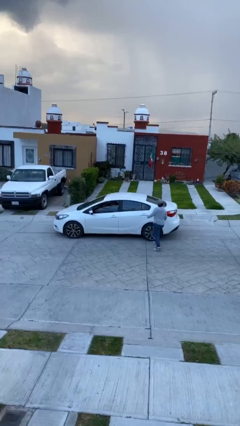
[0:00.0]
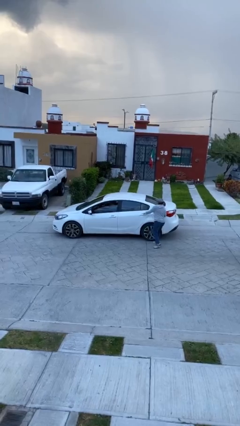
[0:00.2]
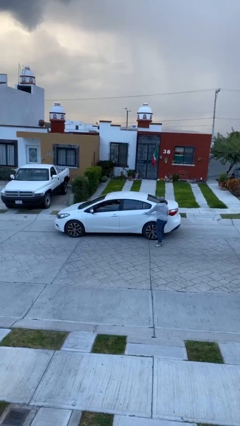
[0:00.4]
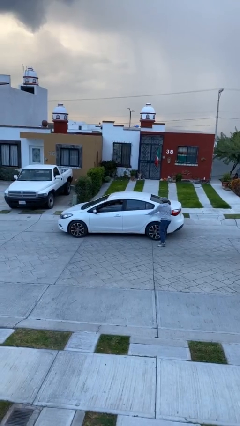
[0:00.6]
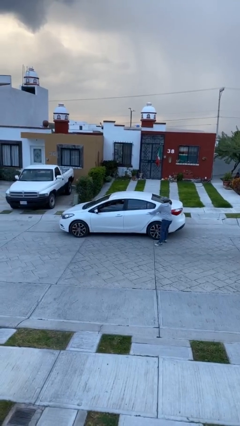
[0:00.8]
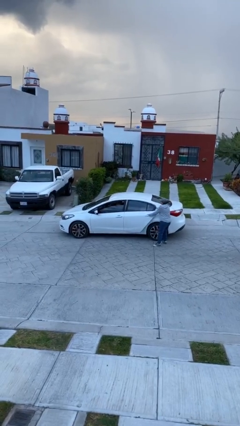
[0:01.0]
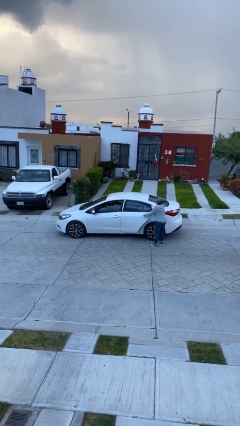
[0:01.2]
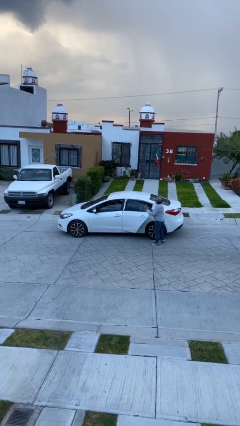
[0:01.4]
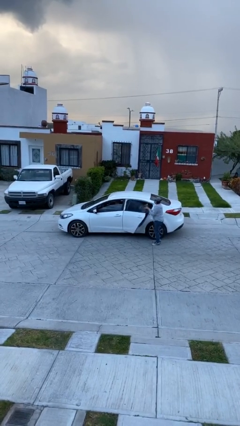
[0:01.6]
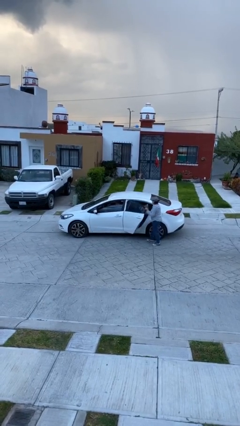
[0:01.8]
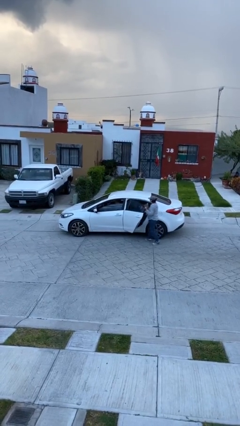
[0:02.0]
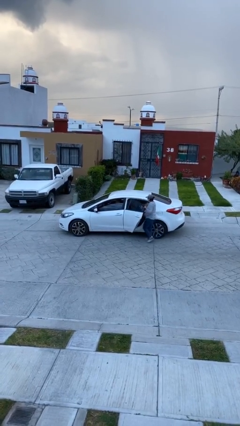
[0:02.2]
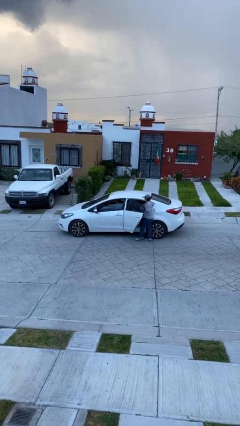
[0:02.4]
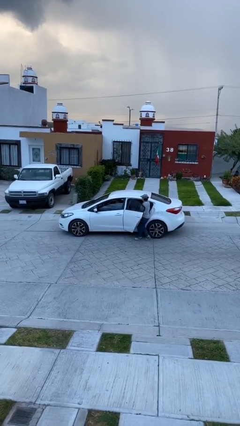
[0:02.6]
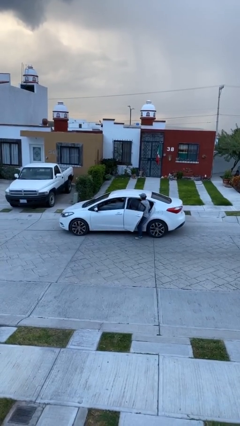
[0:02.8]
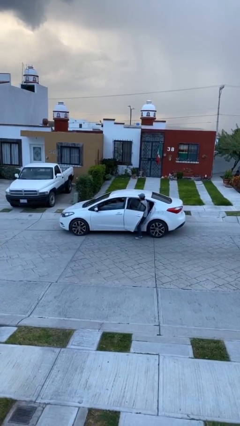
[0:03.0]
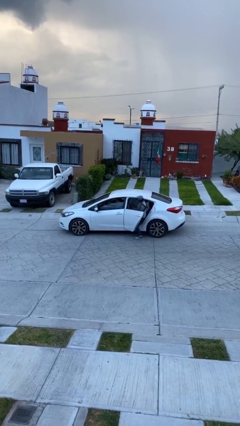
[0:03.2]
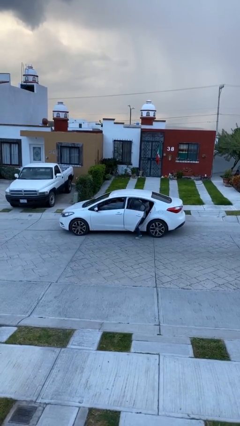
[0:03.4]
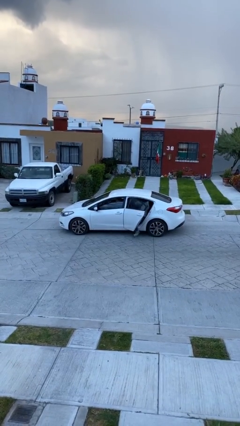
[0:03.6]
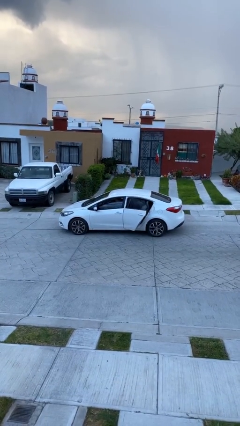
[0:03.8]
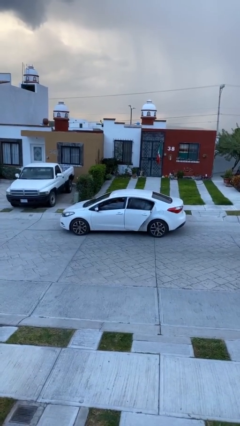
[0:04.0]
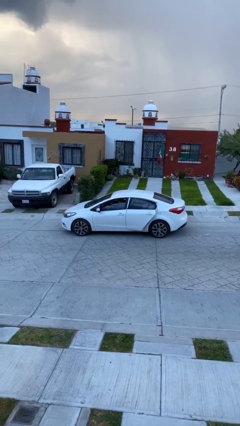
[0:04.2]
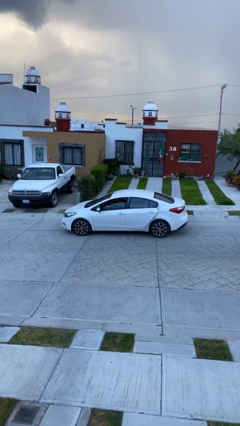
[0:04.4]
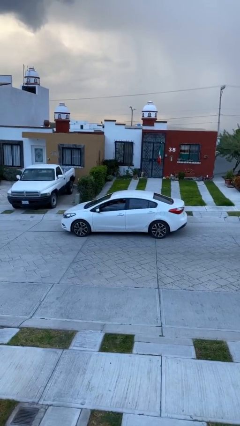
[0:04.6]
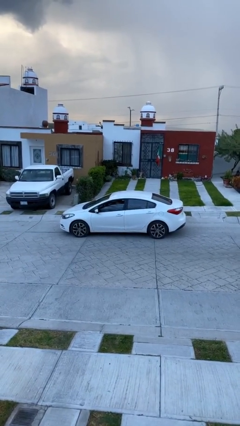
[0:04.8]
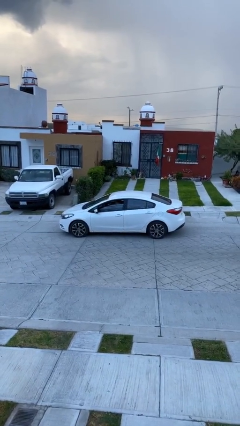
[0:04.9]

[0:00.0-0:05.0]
car picks up person

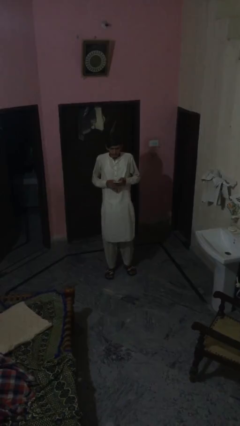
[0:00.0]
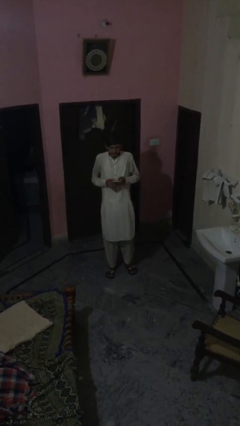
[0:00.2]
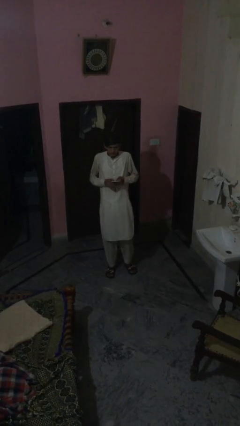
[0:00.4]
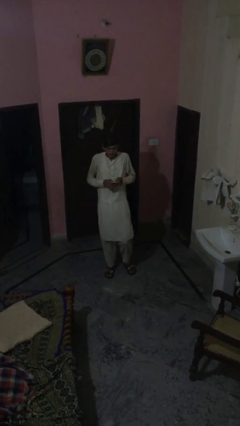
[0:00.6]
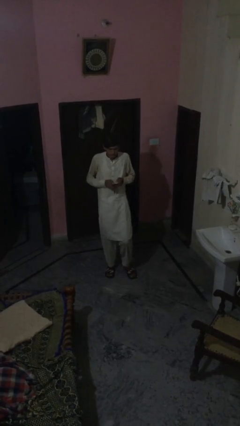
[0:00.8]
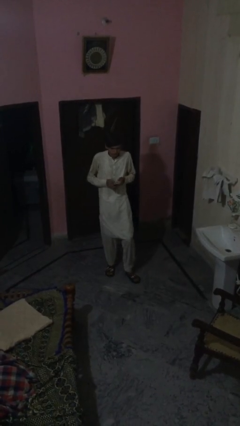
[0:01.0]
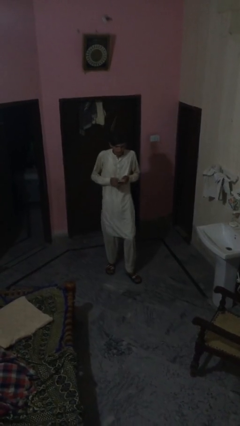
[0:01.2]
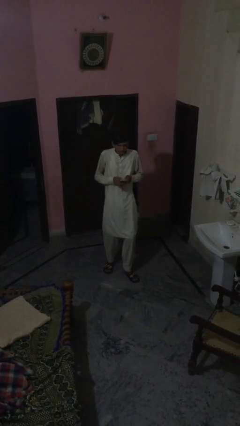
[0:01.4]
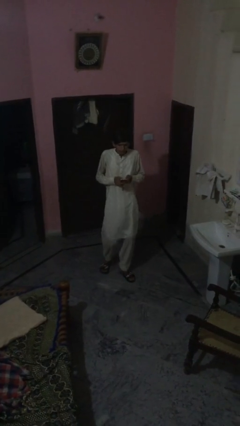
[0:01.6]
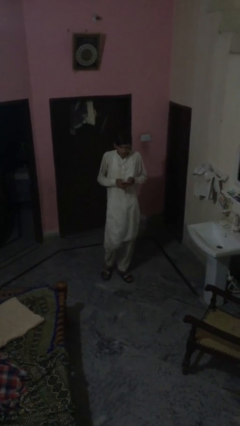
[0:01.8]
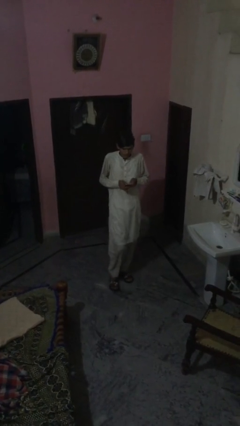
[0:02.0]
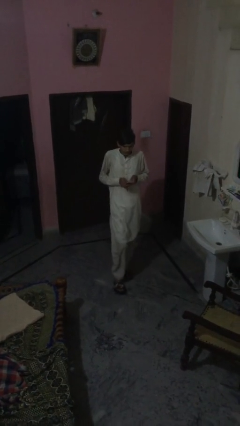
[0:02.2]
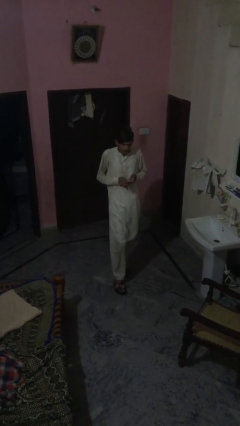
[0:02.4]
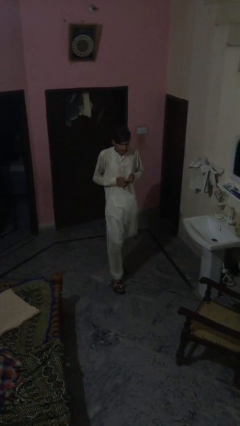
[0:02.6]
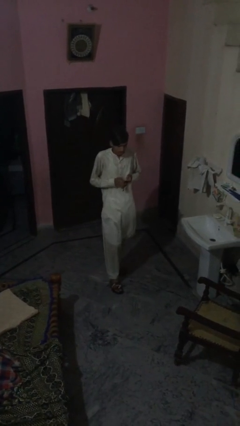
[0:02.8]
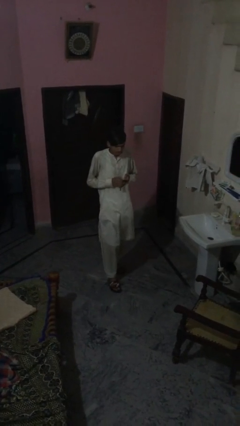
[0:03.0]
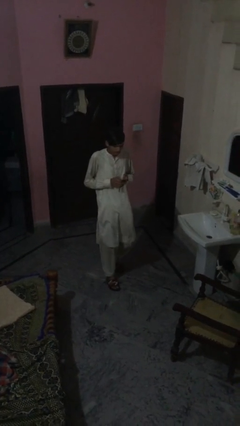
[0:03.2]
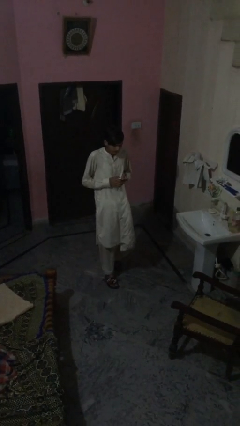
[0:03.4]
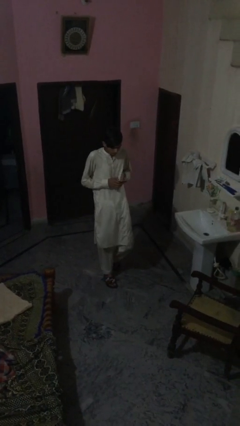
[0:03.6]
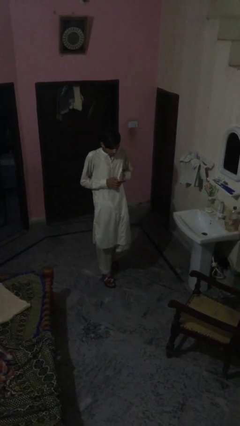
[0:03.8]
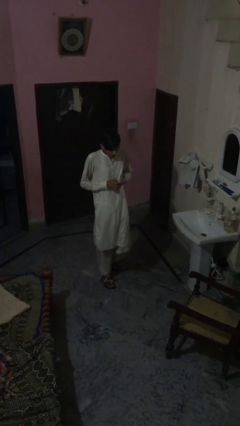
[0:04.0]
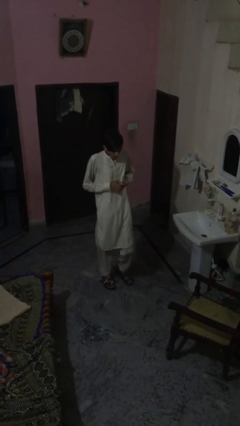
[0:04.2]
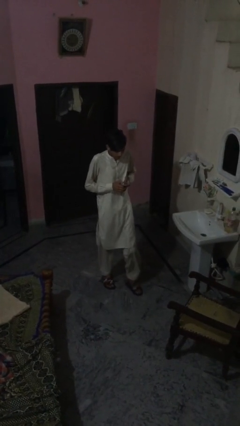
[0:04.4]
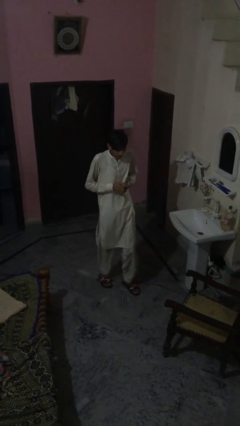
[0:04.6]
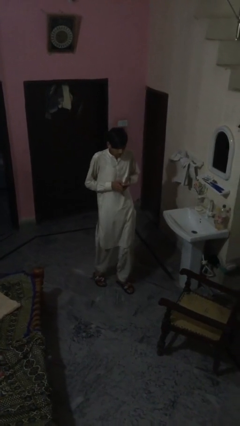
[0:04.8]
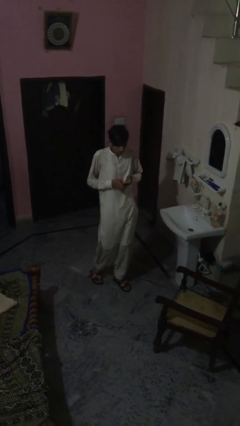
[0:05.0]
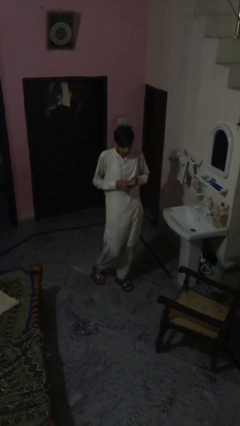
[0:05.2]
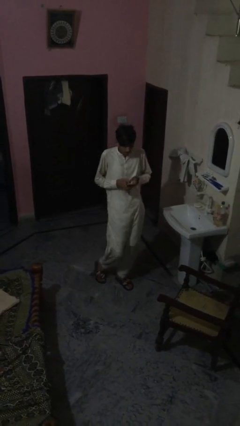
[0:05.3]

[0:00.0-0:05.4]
person texts on phone

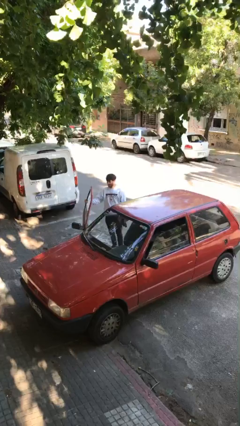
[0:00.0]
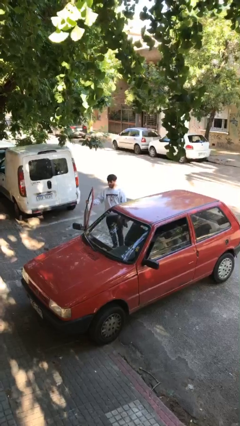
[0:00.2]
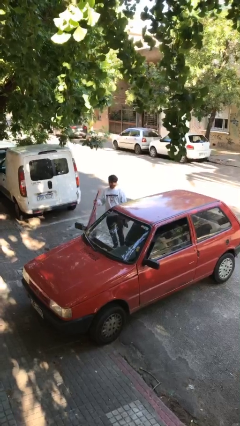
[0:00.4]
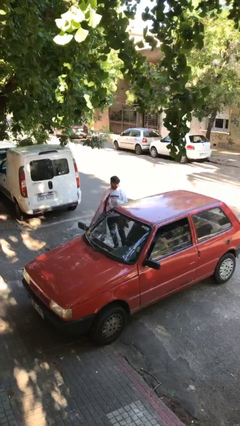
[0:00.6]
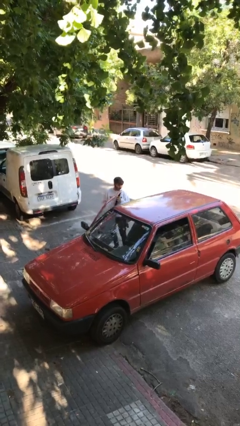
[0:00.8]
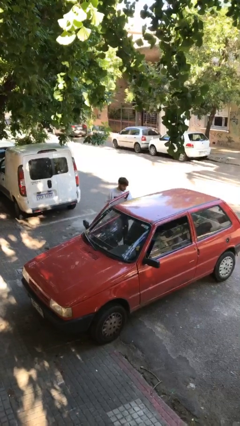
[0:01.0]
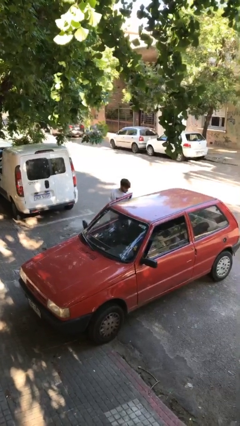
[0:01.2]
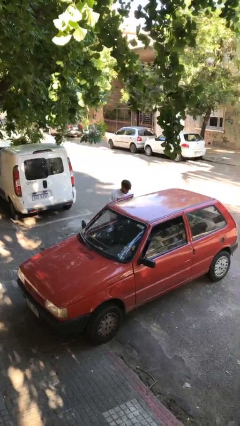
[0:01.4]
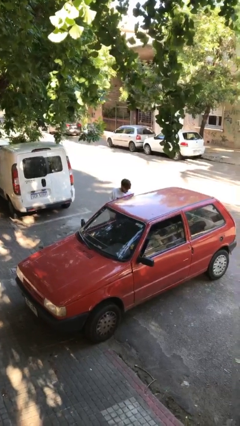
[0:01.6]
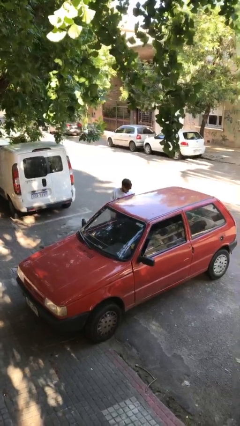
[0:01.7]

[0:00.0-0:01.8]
person closes car door

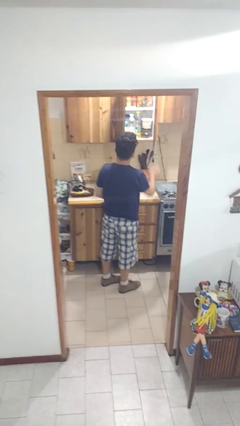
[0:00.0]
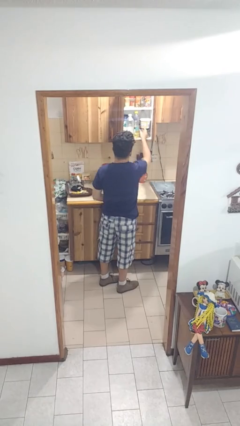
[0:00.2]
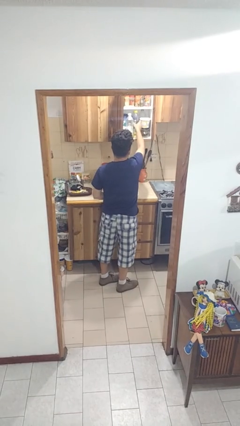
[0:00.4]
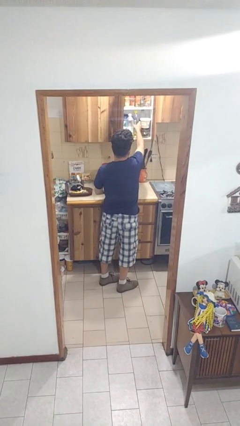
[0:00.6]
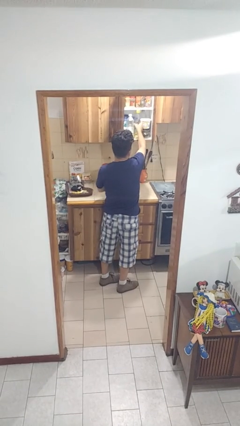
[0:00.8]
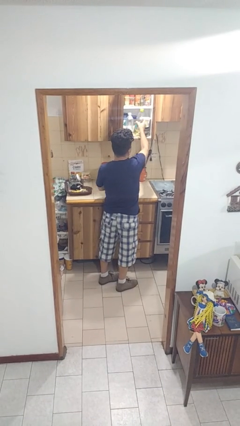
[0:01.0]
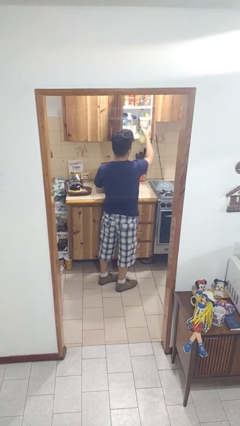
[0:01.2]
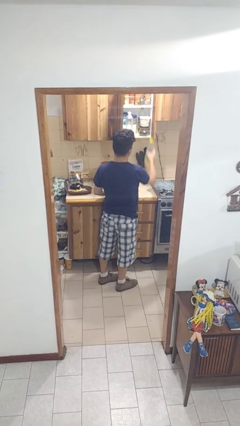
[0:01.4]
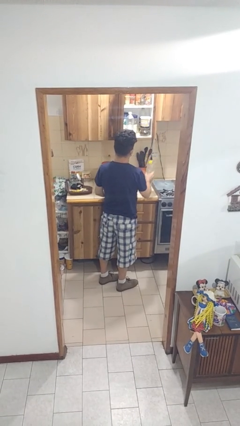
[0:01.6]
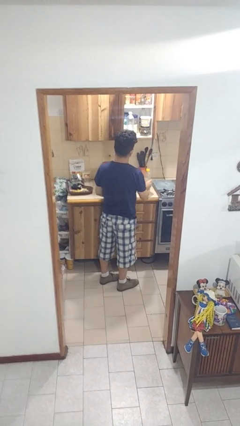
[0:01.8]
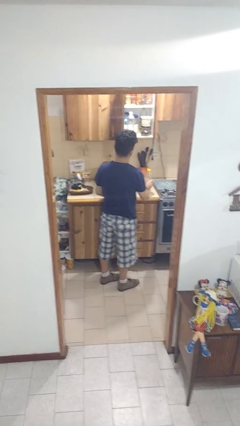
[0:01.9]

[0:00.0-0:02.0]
person takes object from cabinet

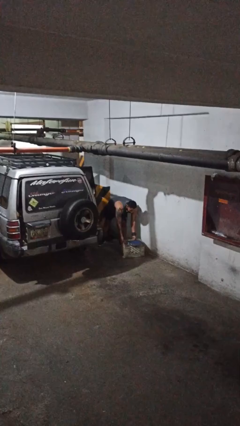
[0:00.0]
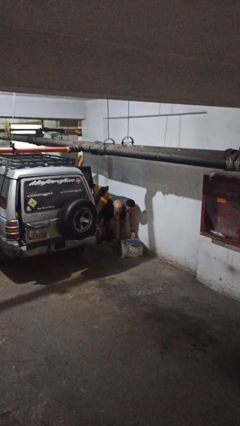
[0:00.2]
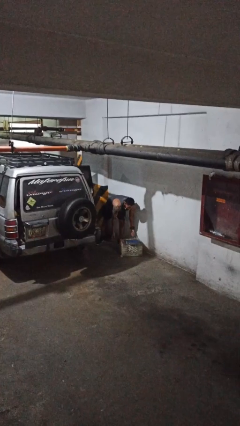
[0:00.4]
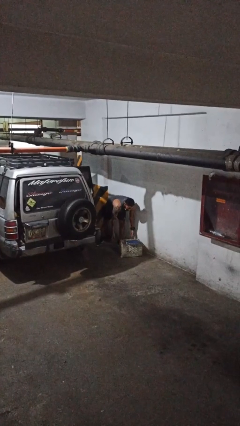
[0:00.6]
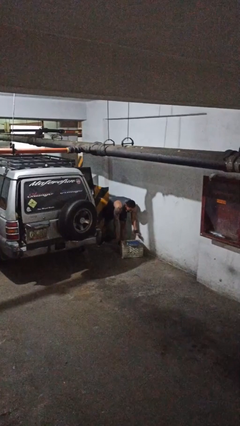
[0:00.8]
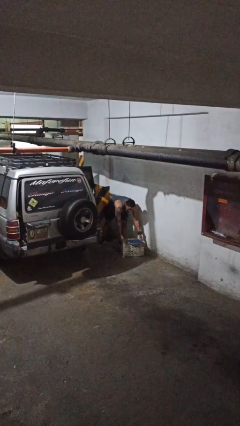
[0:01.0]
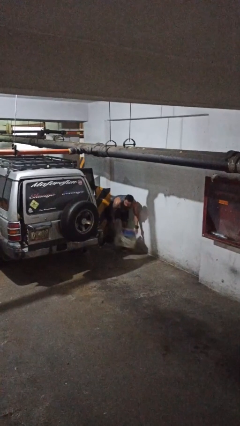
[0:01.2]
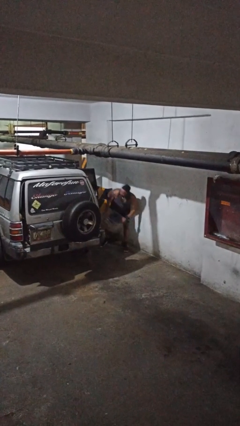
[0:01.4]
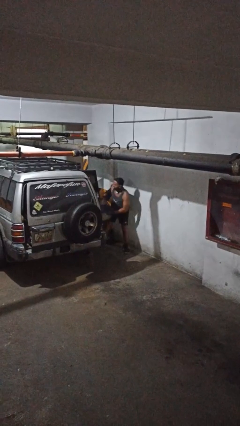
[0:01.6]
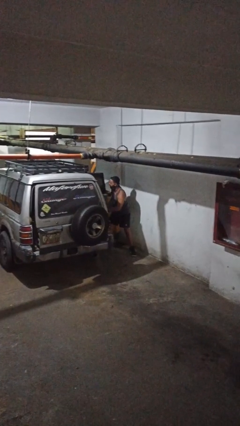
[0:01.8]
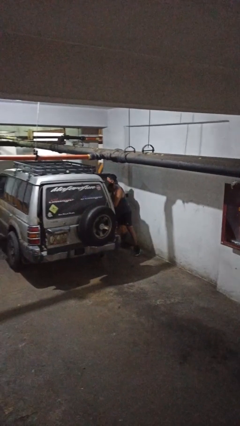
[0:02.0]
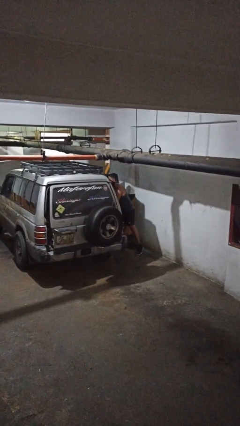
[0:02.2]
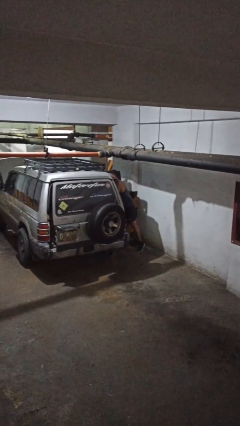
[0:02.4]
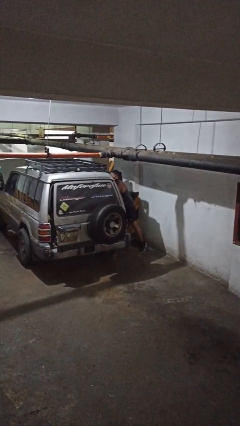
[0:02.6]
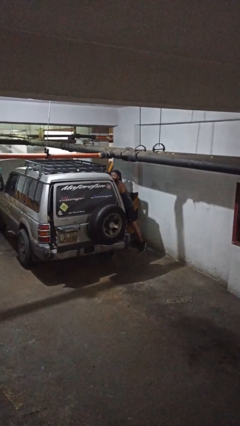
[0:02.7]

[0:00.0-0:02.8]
person loads car

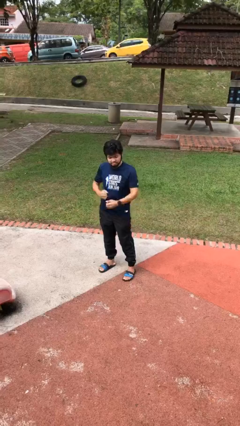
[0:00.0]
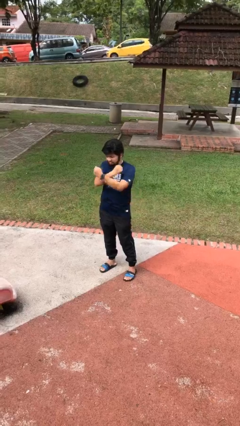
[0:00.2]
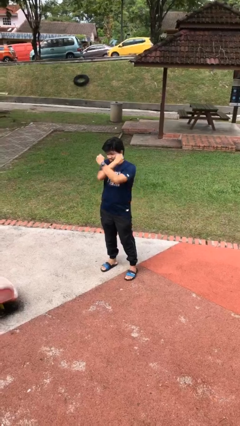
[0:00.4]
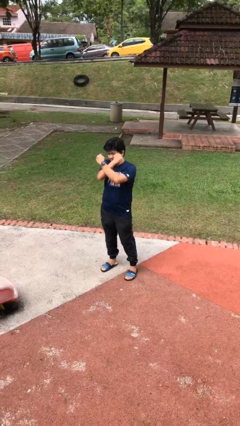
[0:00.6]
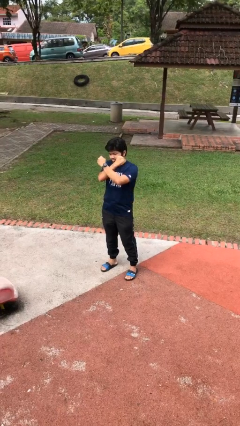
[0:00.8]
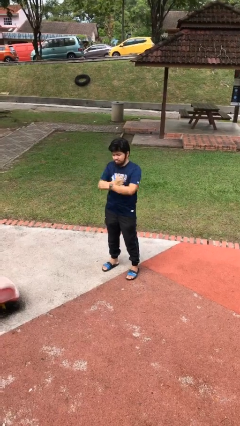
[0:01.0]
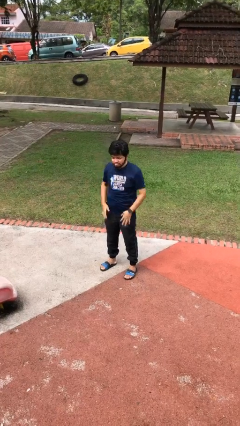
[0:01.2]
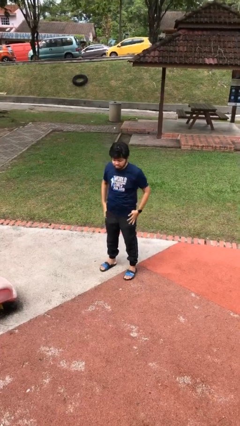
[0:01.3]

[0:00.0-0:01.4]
person gestures arms x
